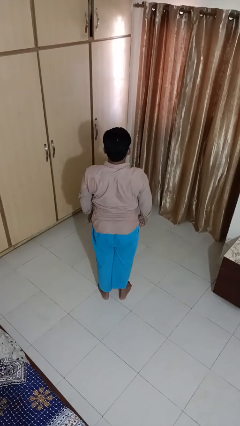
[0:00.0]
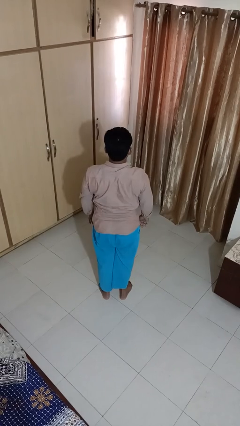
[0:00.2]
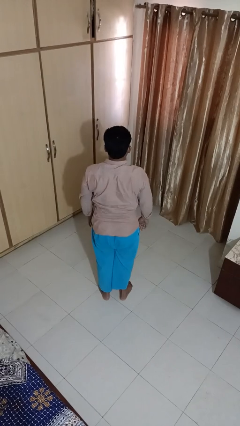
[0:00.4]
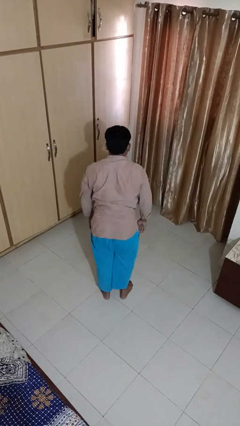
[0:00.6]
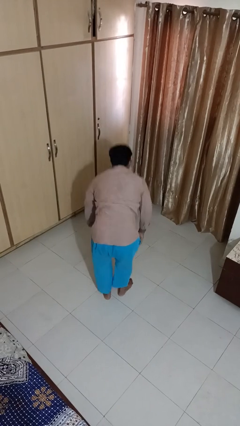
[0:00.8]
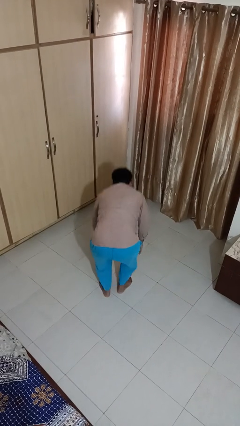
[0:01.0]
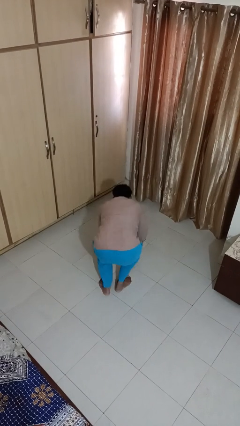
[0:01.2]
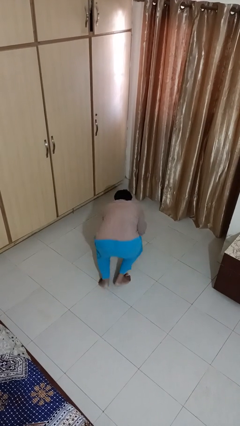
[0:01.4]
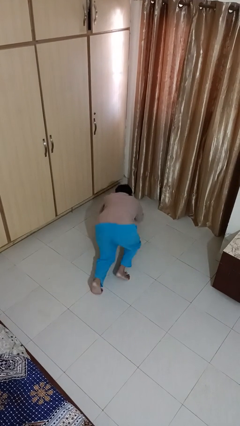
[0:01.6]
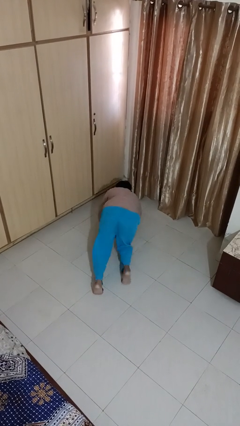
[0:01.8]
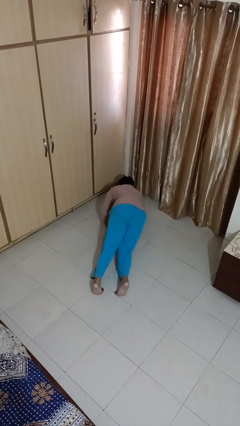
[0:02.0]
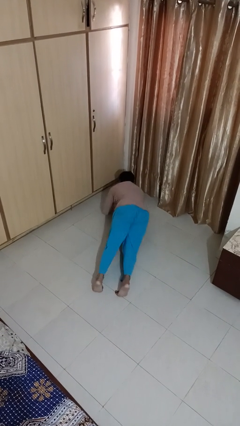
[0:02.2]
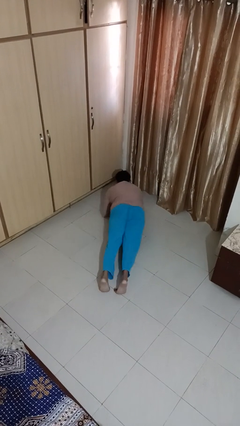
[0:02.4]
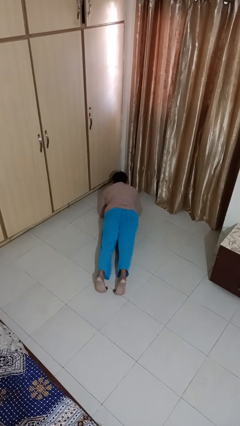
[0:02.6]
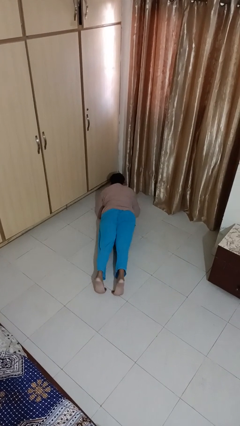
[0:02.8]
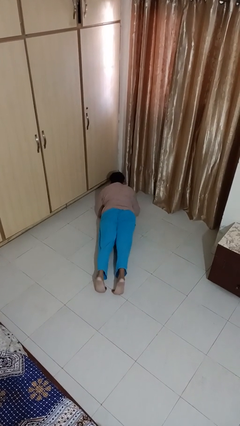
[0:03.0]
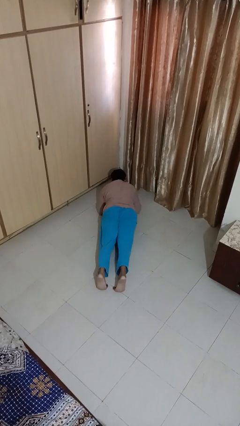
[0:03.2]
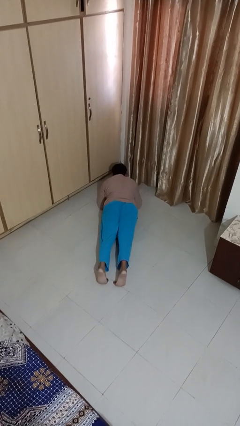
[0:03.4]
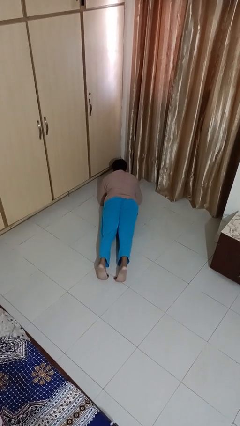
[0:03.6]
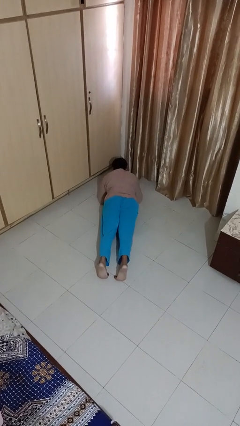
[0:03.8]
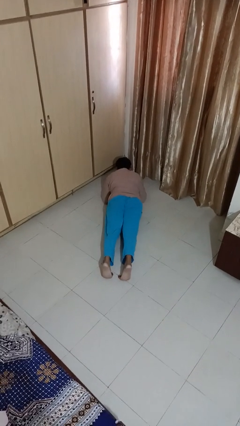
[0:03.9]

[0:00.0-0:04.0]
person exercises with plank

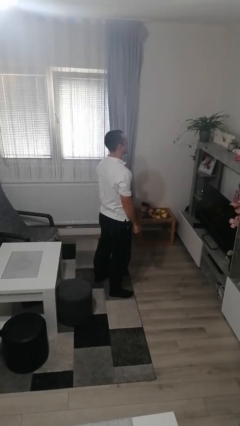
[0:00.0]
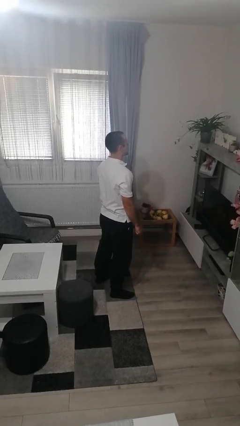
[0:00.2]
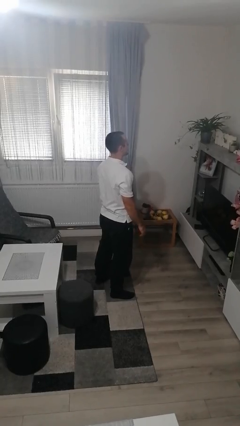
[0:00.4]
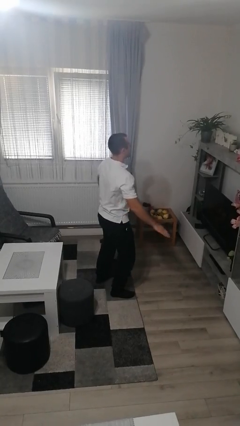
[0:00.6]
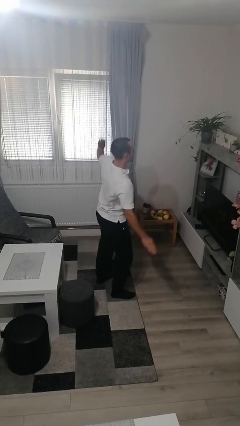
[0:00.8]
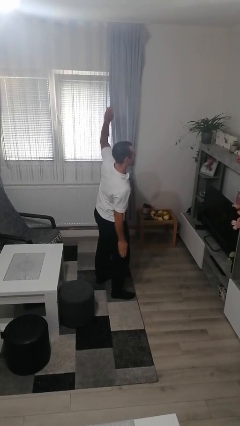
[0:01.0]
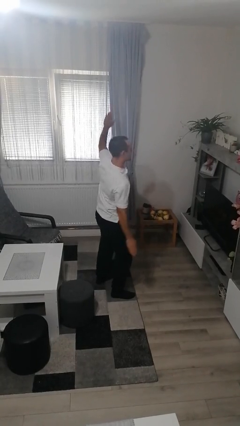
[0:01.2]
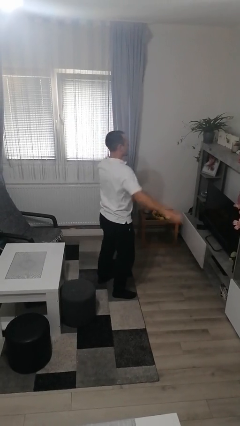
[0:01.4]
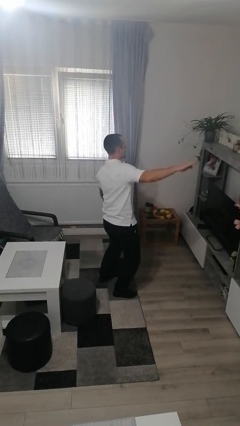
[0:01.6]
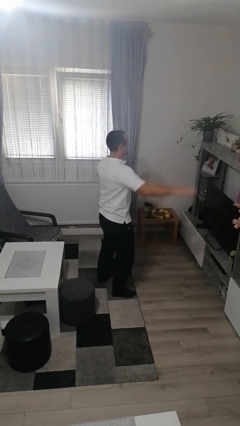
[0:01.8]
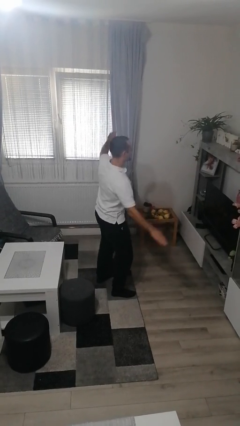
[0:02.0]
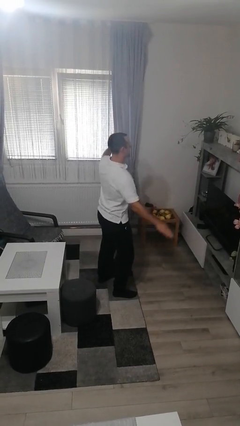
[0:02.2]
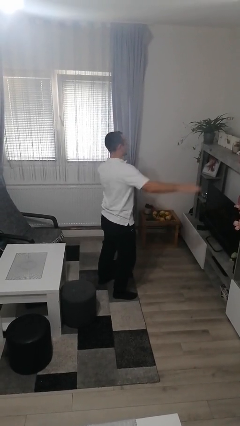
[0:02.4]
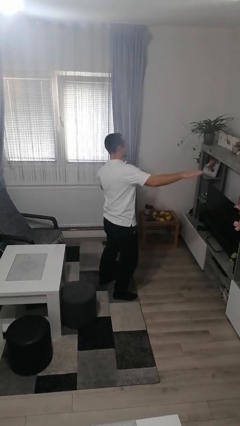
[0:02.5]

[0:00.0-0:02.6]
person dances in place

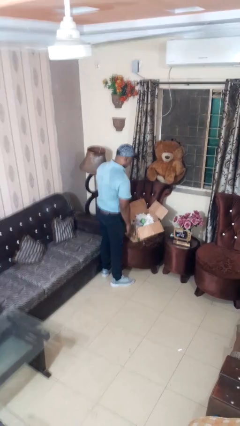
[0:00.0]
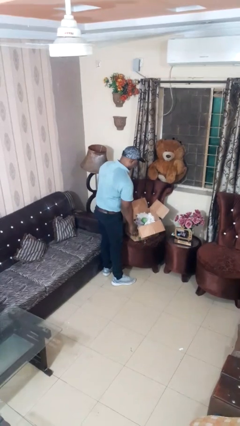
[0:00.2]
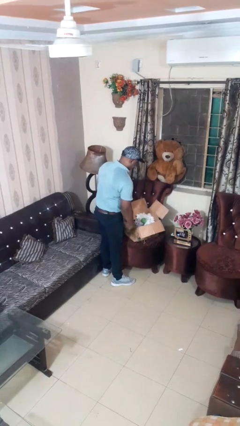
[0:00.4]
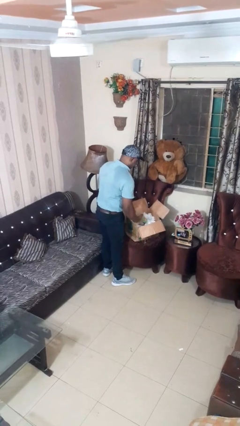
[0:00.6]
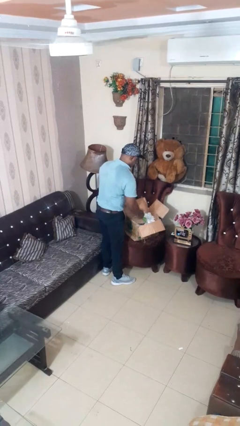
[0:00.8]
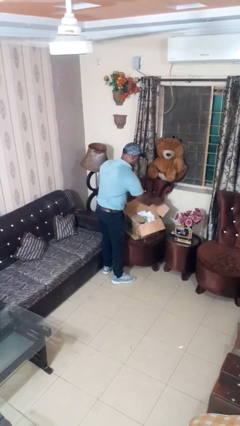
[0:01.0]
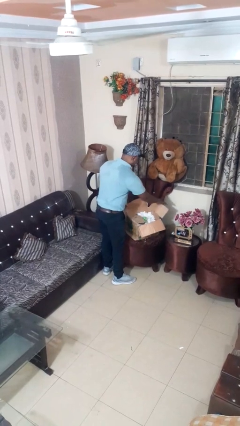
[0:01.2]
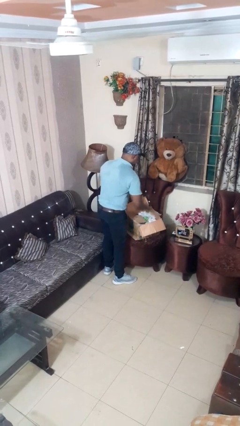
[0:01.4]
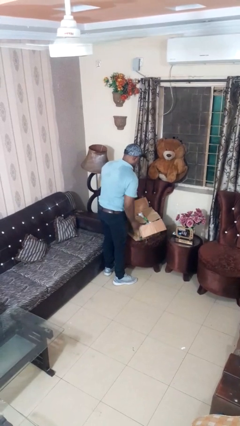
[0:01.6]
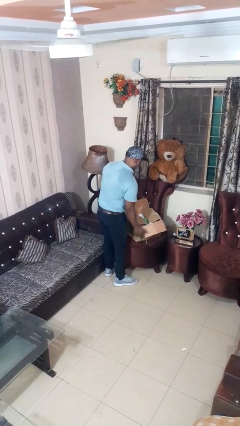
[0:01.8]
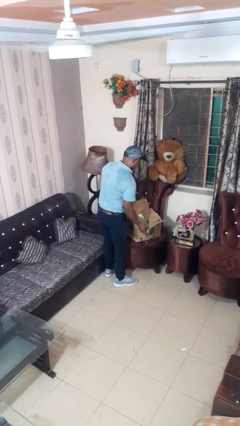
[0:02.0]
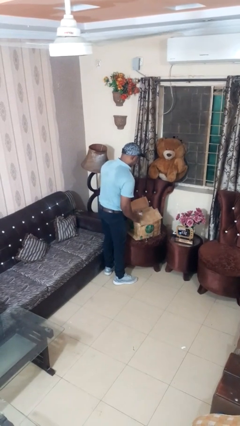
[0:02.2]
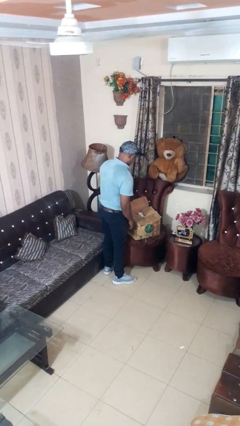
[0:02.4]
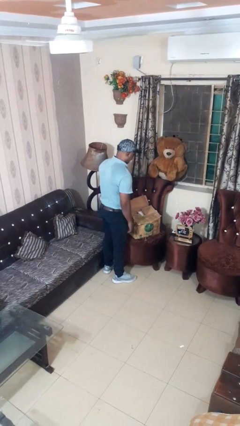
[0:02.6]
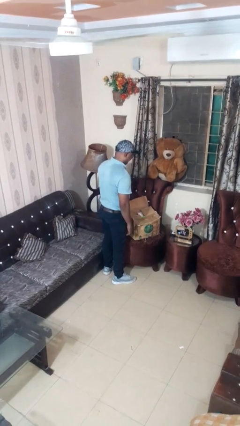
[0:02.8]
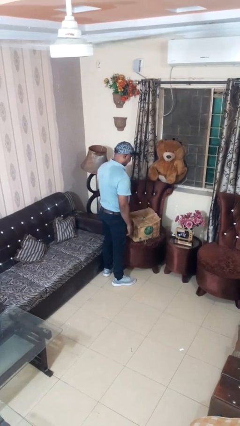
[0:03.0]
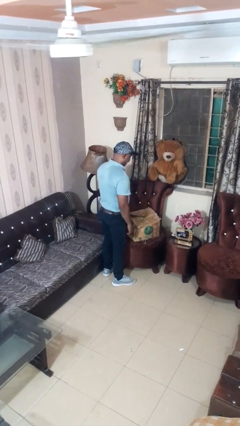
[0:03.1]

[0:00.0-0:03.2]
person closes box

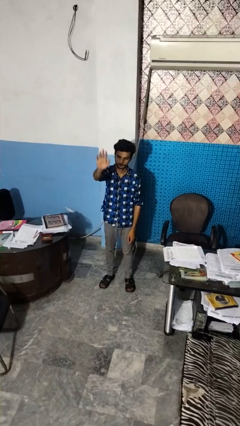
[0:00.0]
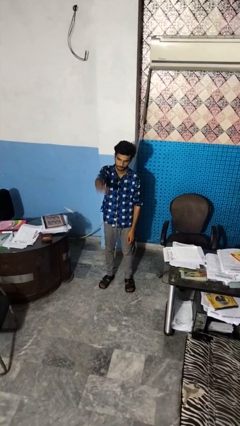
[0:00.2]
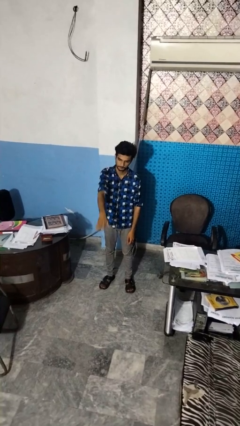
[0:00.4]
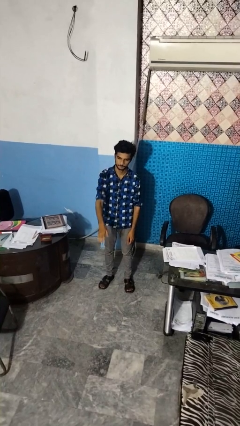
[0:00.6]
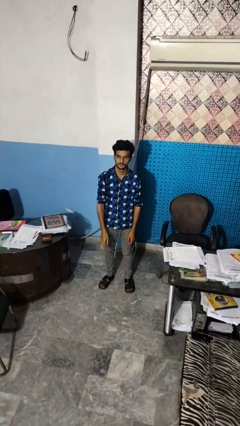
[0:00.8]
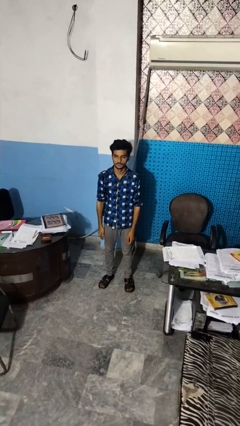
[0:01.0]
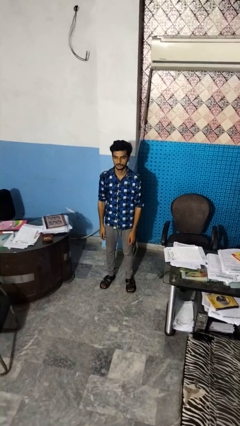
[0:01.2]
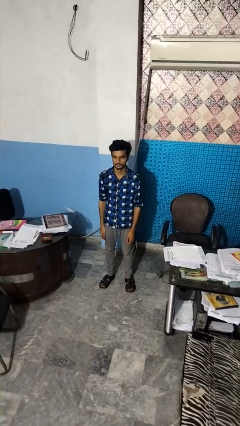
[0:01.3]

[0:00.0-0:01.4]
person gestures swipe down

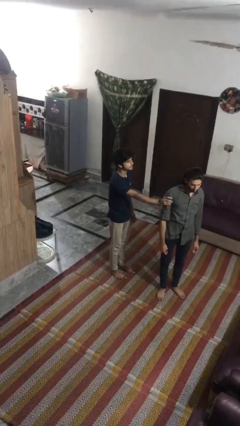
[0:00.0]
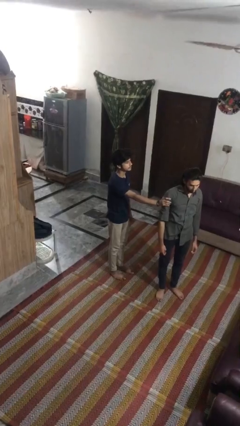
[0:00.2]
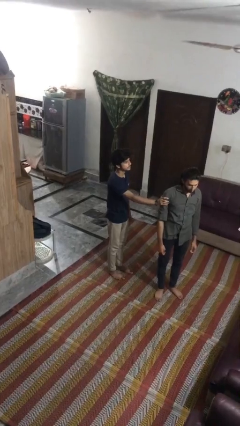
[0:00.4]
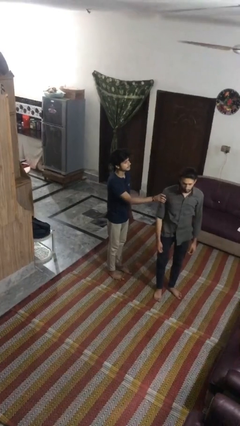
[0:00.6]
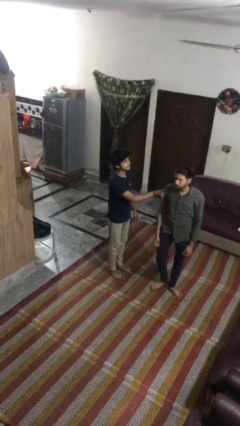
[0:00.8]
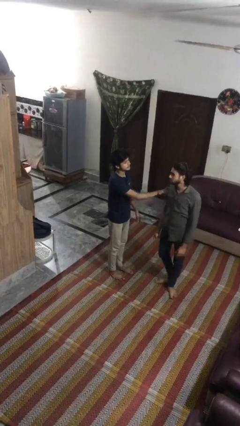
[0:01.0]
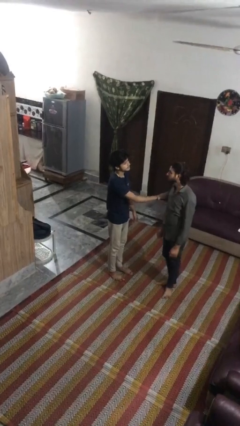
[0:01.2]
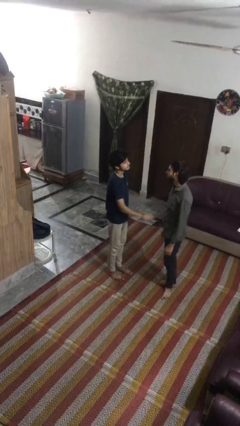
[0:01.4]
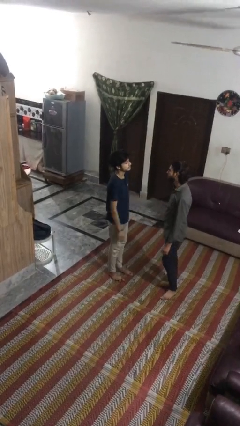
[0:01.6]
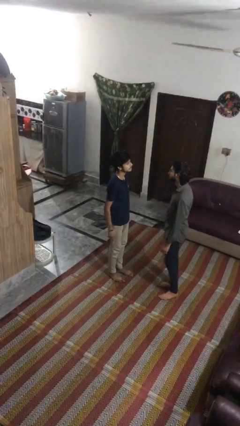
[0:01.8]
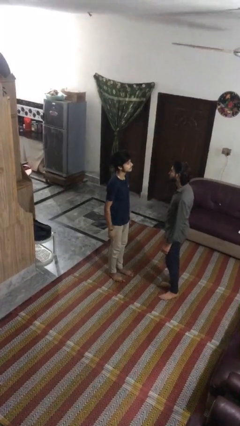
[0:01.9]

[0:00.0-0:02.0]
person spins person around

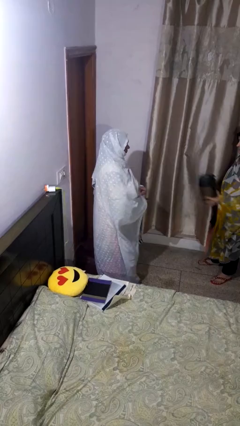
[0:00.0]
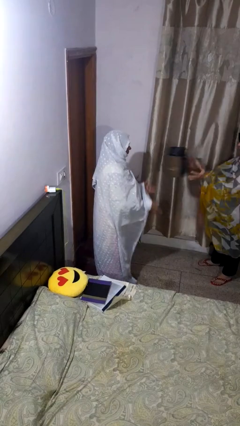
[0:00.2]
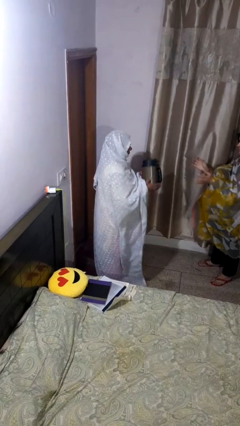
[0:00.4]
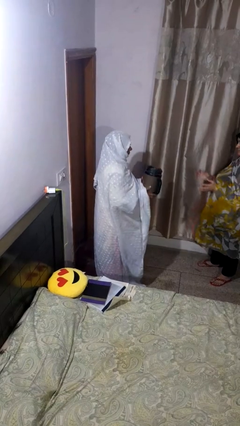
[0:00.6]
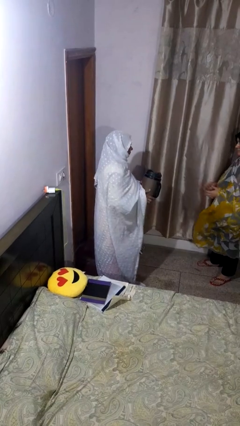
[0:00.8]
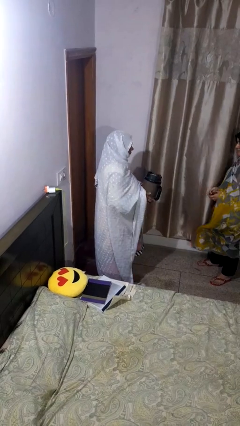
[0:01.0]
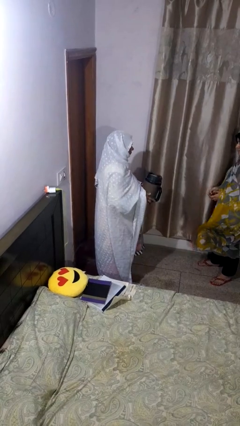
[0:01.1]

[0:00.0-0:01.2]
person catches object from person

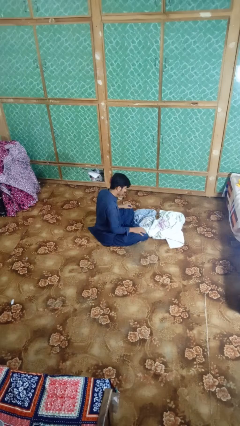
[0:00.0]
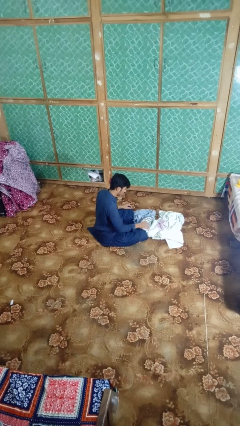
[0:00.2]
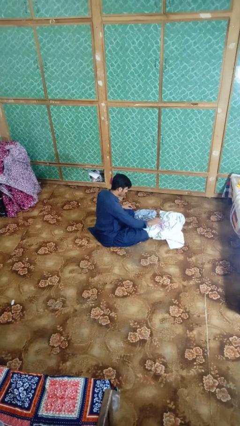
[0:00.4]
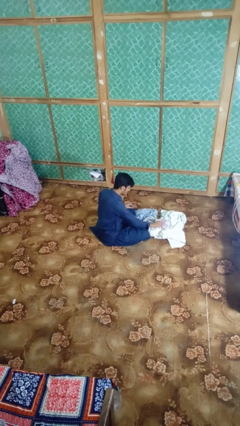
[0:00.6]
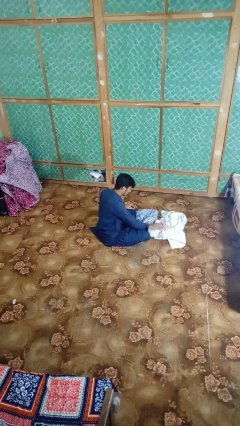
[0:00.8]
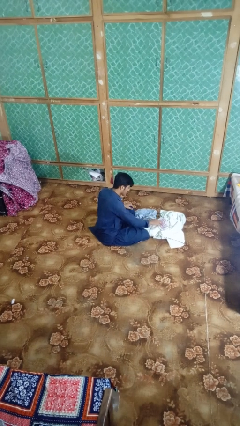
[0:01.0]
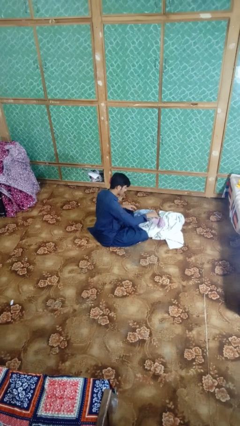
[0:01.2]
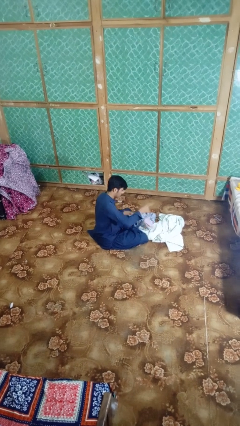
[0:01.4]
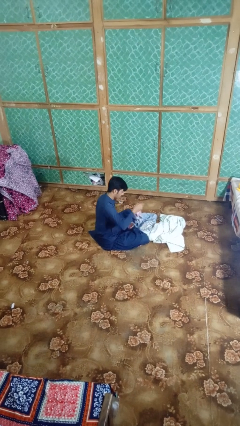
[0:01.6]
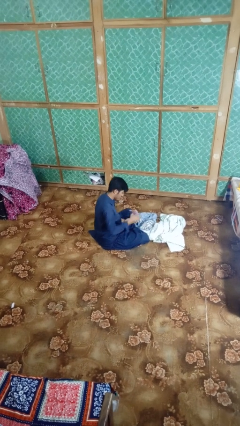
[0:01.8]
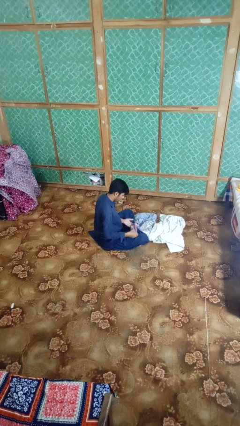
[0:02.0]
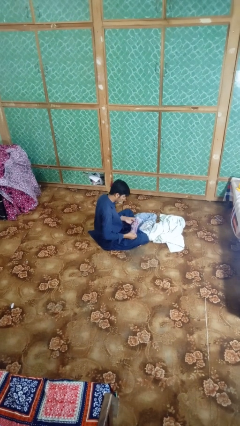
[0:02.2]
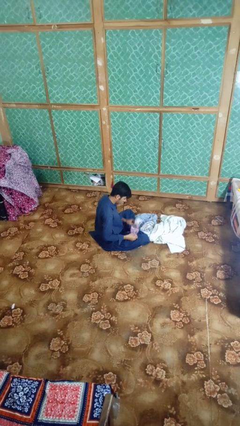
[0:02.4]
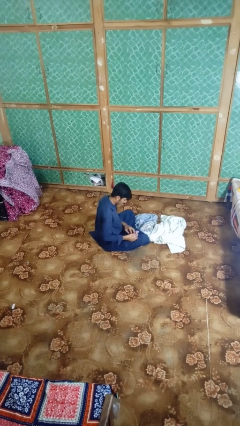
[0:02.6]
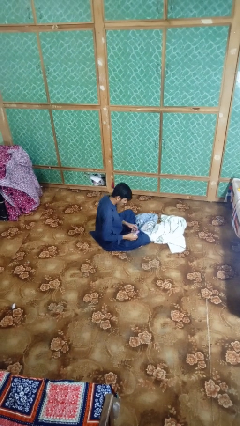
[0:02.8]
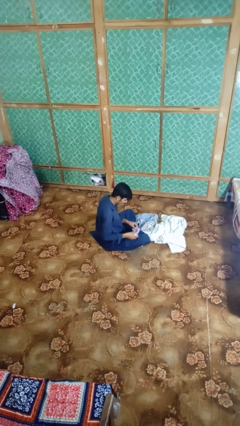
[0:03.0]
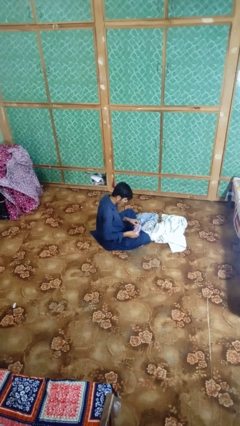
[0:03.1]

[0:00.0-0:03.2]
person folds socks
